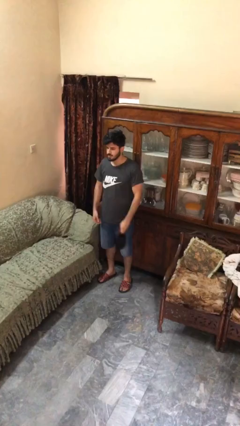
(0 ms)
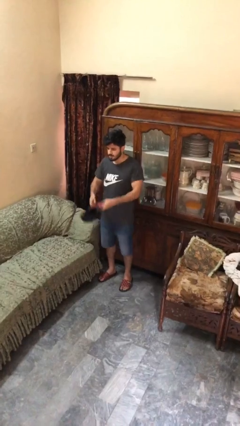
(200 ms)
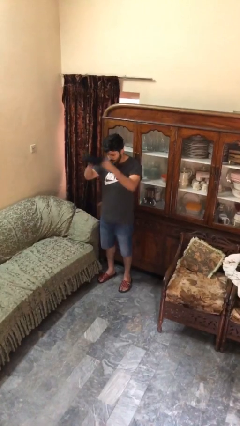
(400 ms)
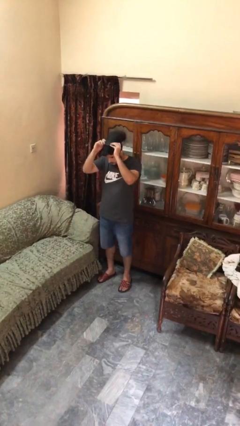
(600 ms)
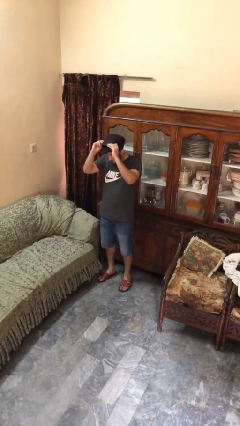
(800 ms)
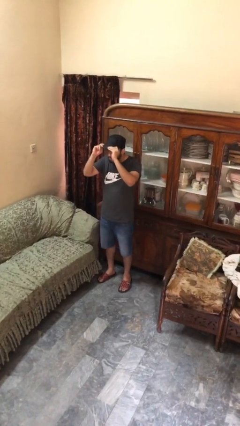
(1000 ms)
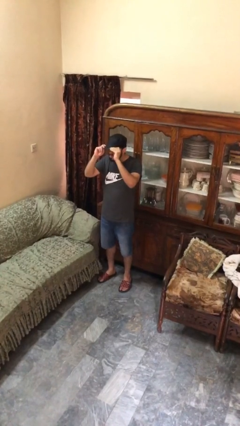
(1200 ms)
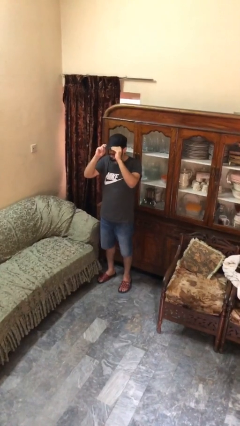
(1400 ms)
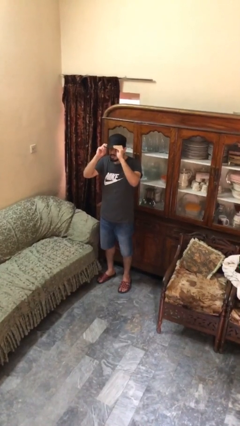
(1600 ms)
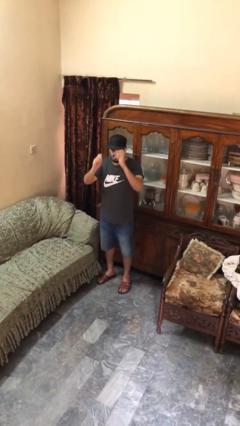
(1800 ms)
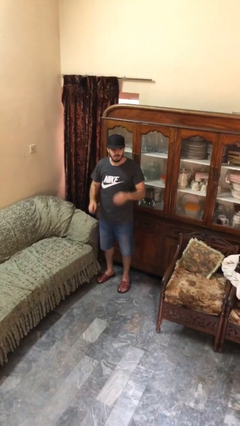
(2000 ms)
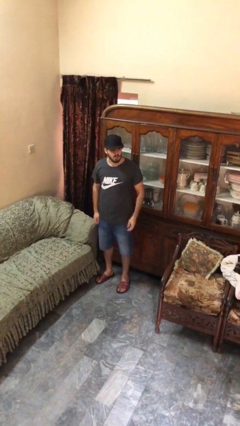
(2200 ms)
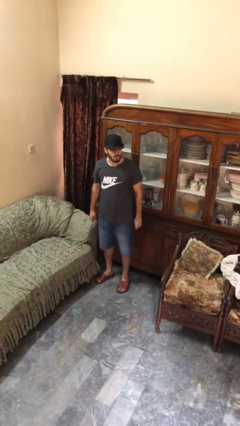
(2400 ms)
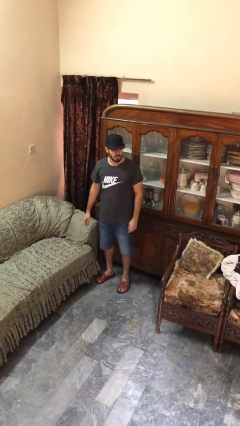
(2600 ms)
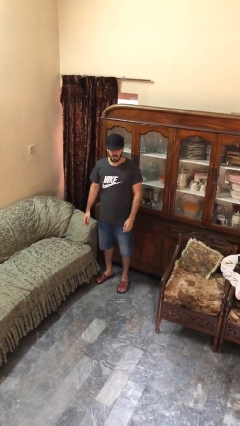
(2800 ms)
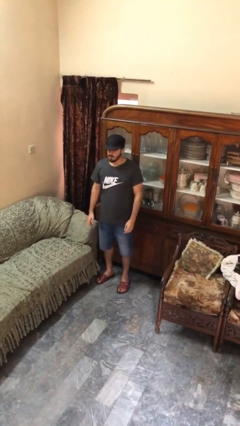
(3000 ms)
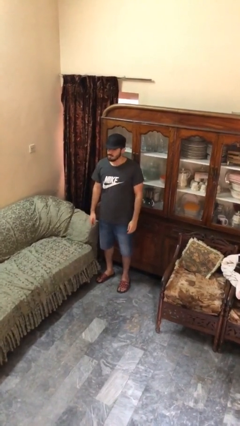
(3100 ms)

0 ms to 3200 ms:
person puts on hat

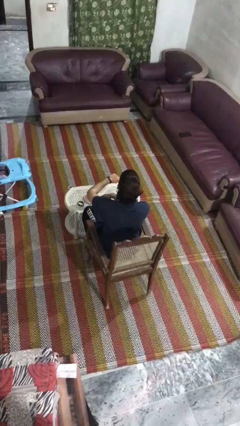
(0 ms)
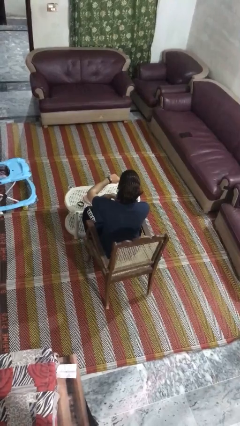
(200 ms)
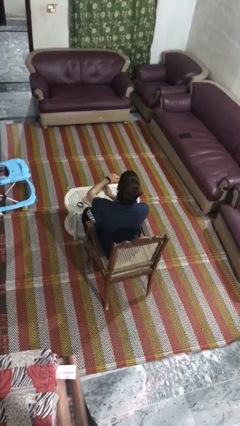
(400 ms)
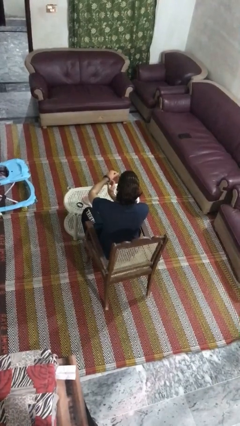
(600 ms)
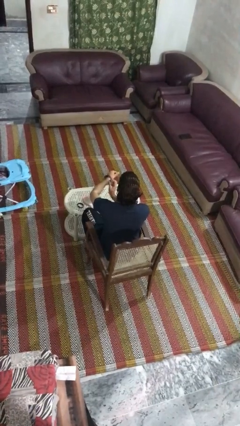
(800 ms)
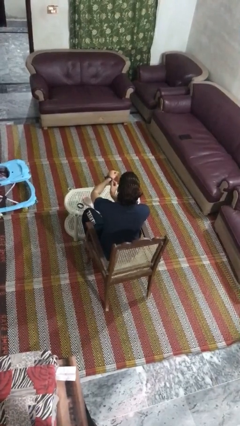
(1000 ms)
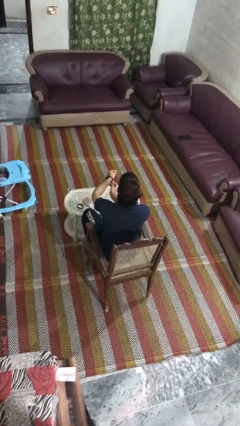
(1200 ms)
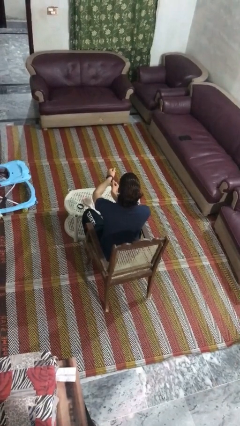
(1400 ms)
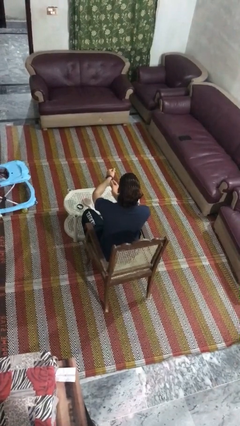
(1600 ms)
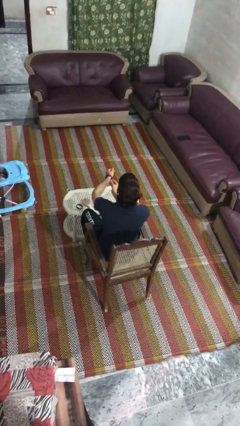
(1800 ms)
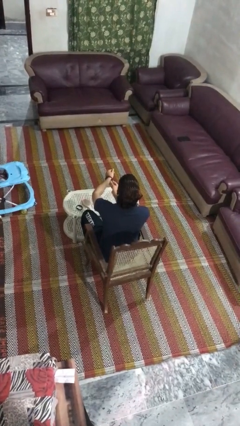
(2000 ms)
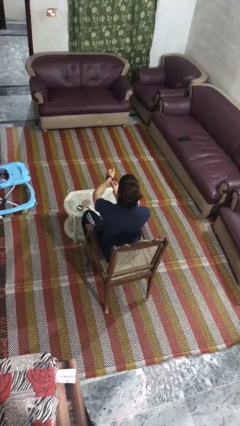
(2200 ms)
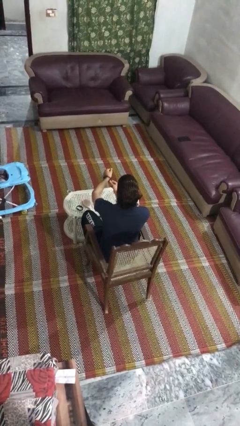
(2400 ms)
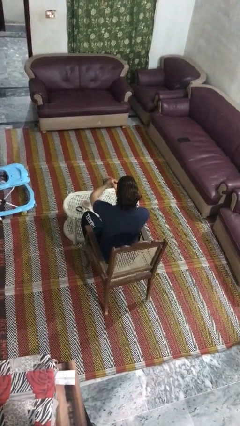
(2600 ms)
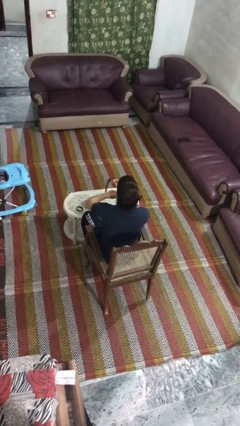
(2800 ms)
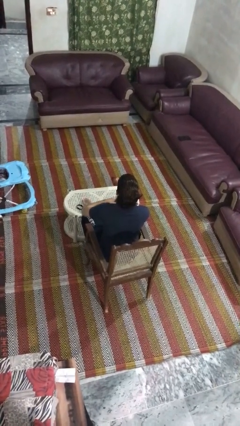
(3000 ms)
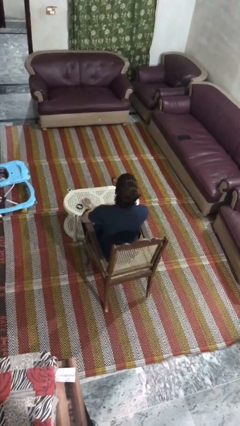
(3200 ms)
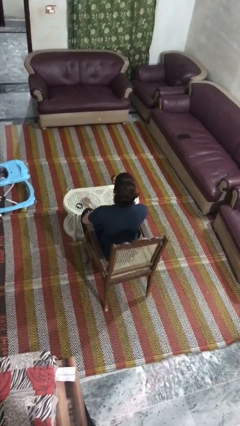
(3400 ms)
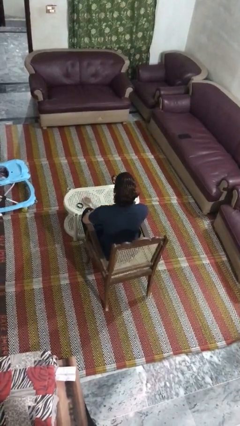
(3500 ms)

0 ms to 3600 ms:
person takes off wristwatch

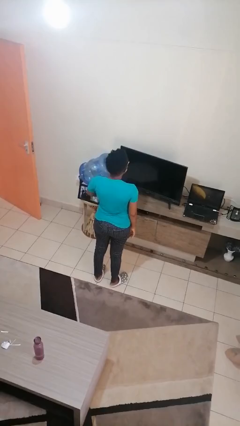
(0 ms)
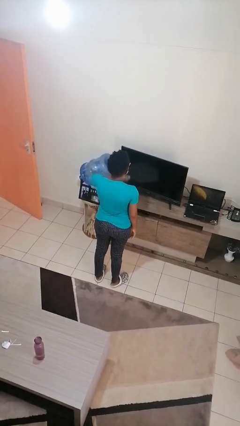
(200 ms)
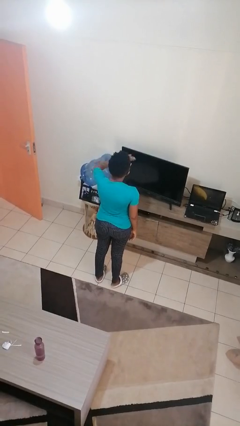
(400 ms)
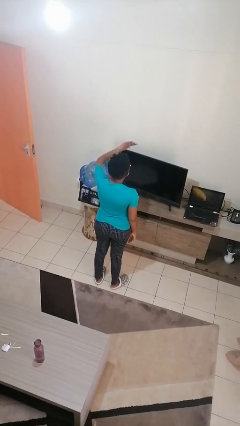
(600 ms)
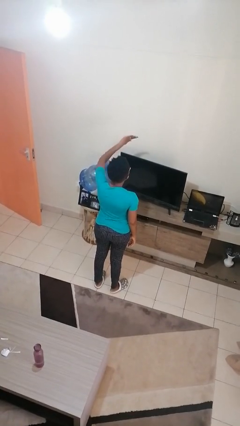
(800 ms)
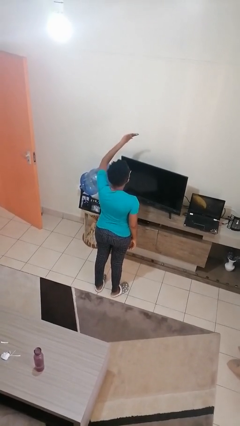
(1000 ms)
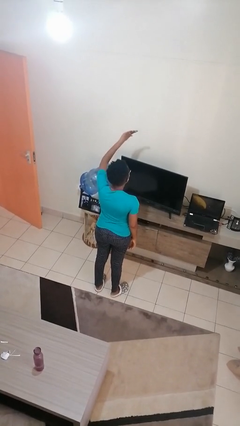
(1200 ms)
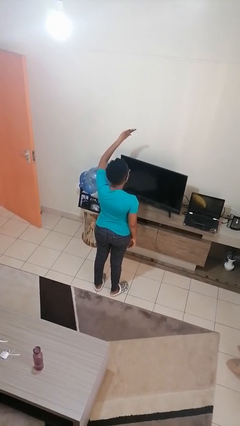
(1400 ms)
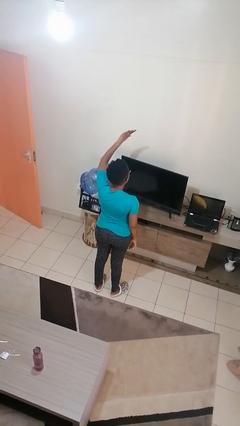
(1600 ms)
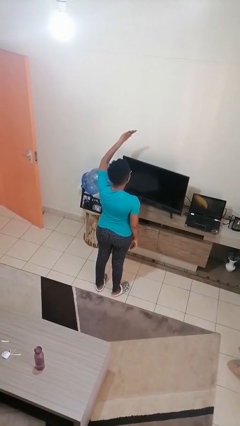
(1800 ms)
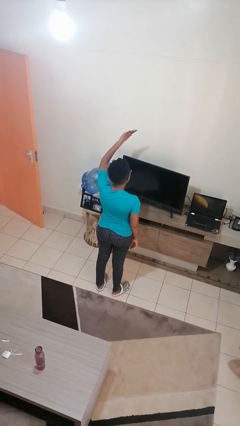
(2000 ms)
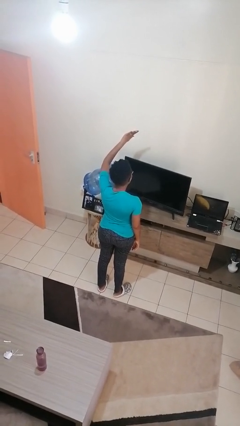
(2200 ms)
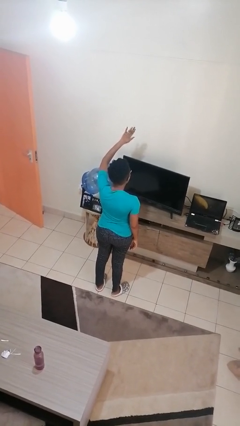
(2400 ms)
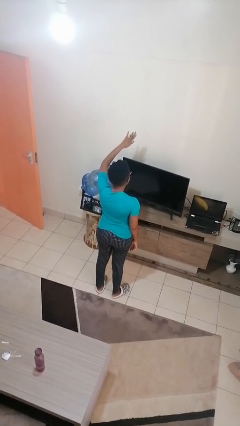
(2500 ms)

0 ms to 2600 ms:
person gestures swipe up

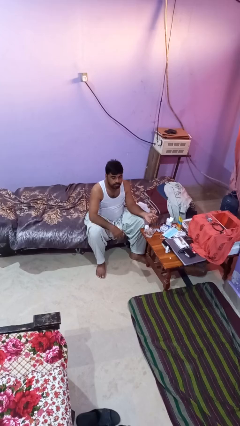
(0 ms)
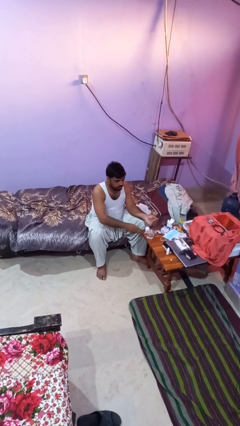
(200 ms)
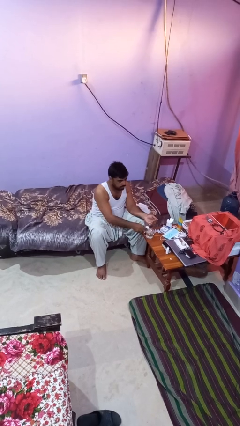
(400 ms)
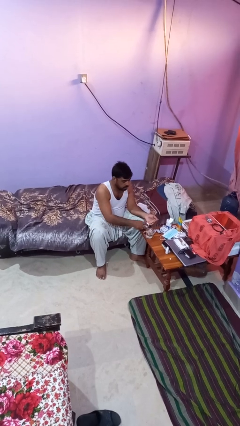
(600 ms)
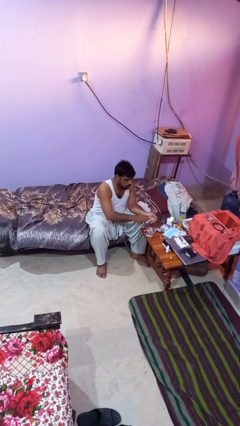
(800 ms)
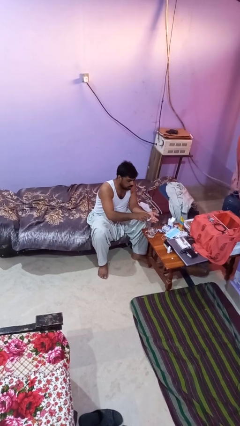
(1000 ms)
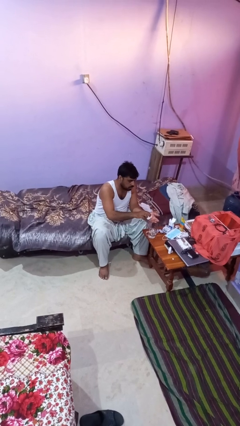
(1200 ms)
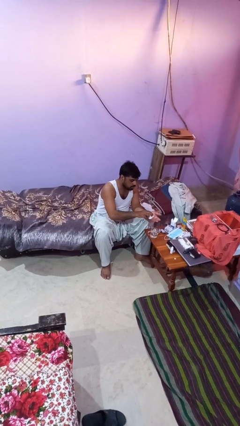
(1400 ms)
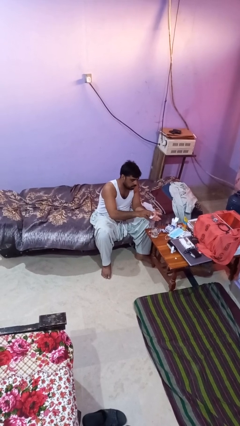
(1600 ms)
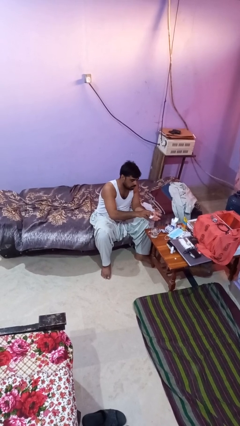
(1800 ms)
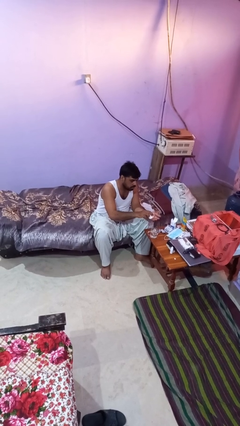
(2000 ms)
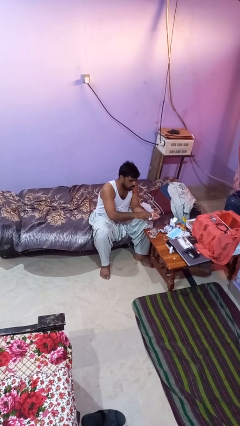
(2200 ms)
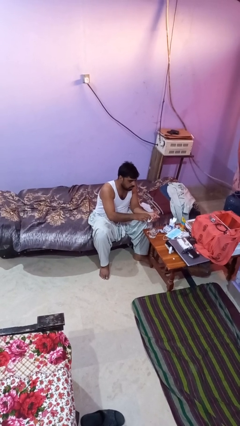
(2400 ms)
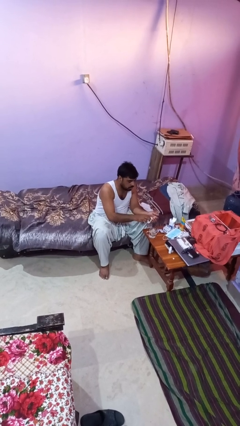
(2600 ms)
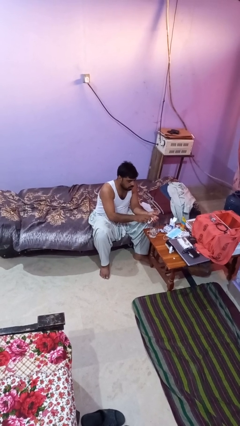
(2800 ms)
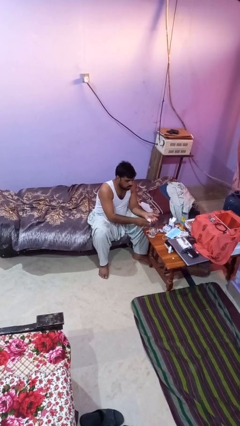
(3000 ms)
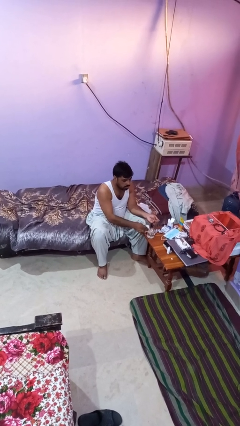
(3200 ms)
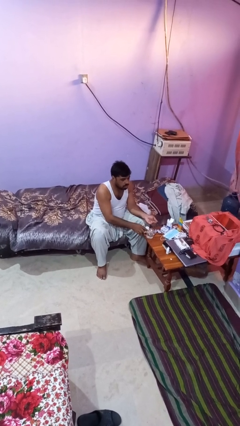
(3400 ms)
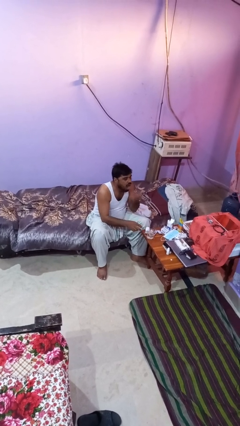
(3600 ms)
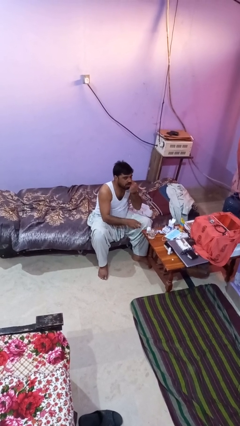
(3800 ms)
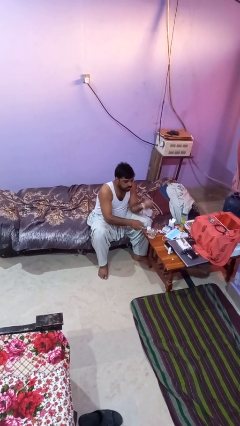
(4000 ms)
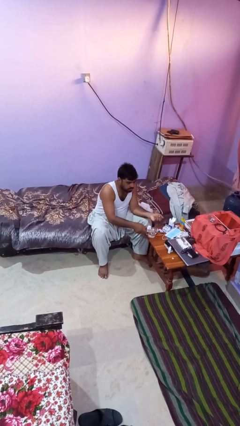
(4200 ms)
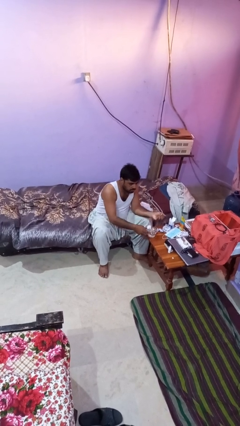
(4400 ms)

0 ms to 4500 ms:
person takes medicine pills

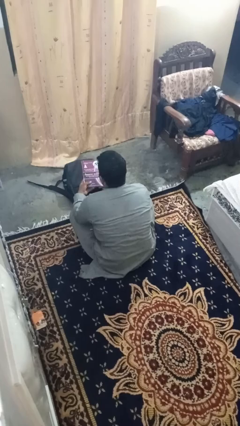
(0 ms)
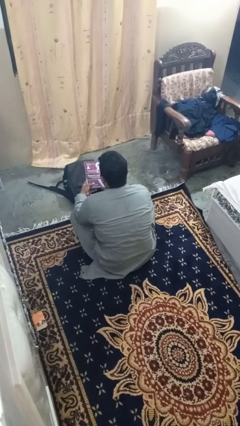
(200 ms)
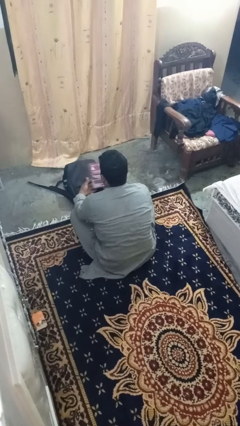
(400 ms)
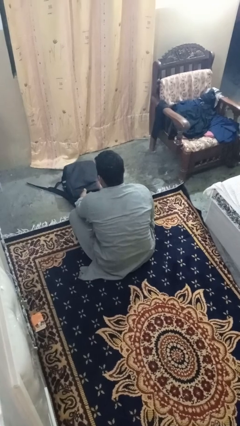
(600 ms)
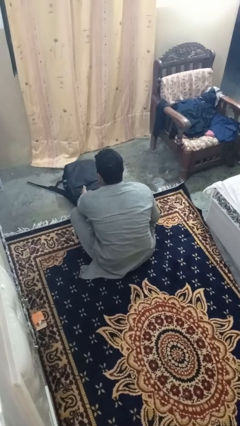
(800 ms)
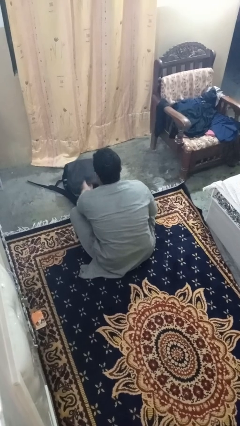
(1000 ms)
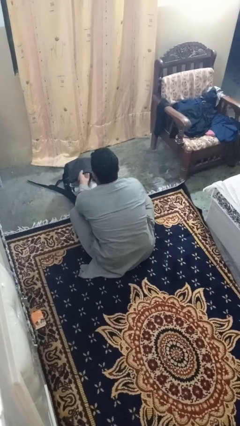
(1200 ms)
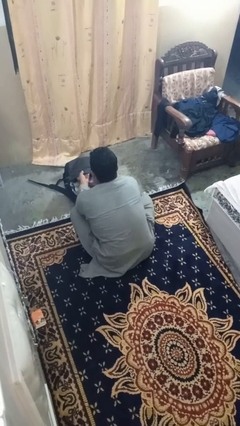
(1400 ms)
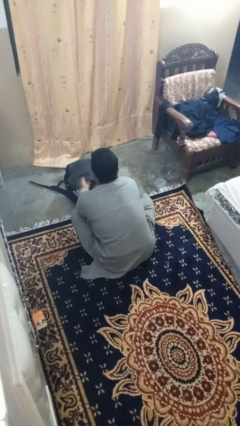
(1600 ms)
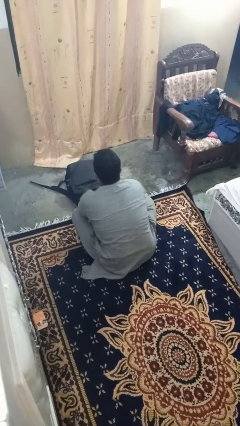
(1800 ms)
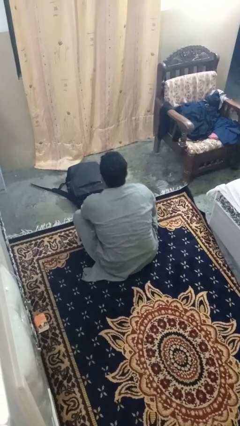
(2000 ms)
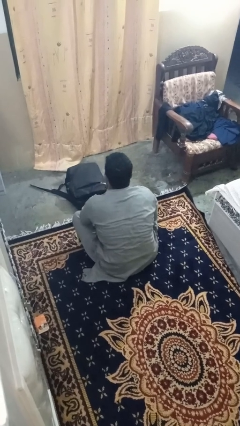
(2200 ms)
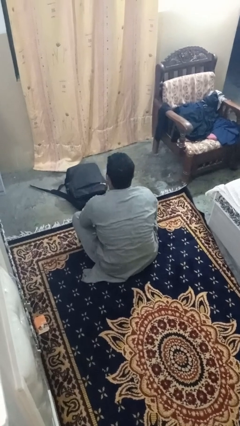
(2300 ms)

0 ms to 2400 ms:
person puts object into bag

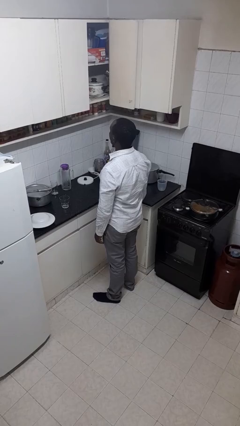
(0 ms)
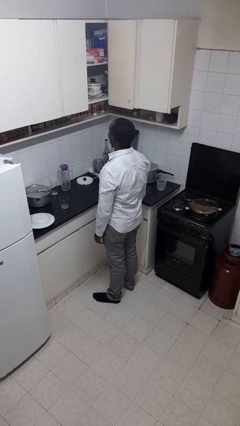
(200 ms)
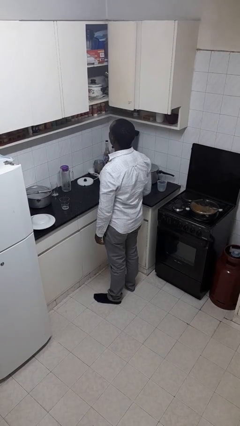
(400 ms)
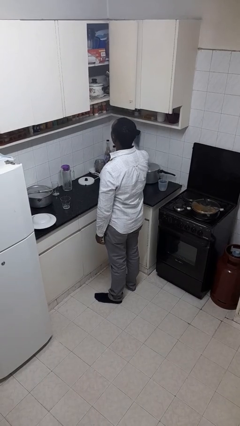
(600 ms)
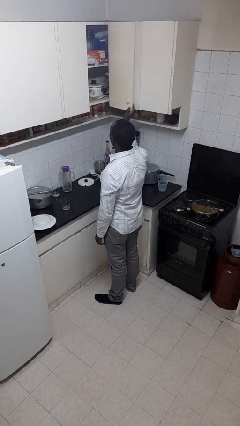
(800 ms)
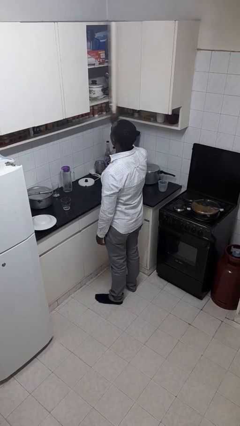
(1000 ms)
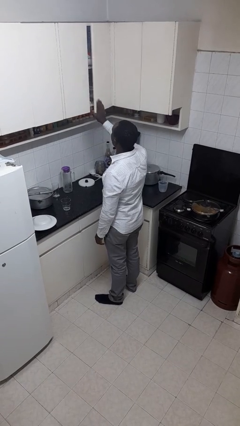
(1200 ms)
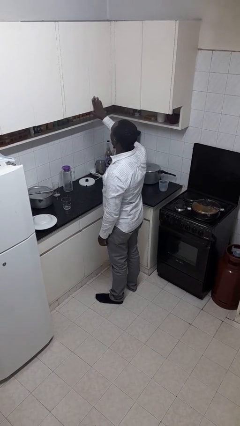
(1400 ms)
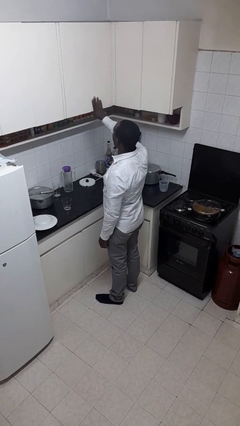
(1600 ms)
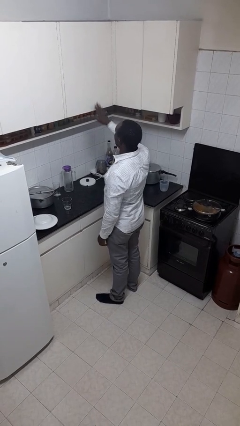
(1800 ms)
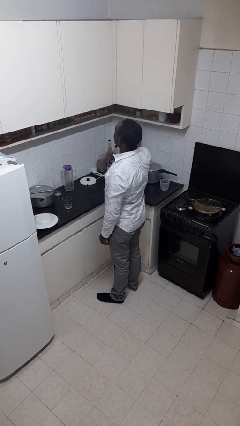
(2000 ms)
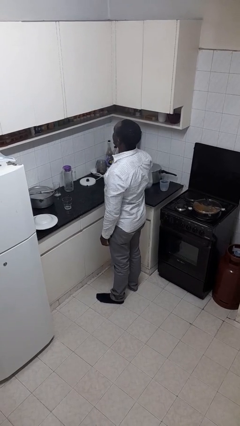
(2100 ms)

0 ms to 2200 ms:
person closes cabinet
